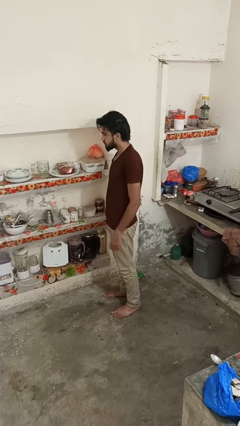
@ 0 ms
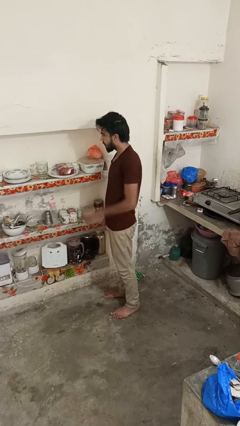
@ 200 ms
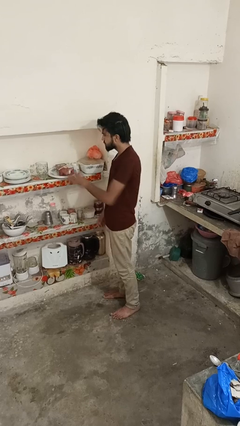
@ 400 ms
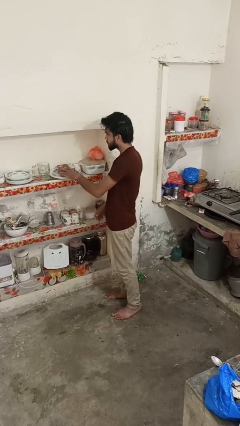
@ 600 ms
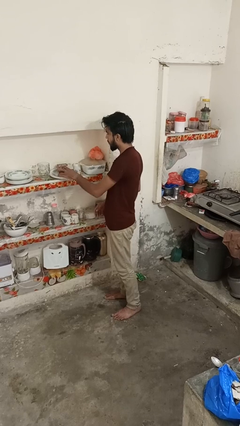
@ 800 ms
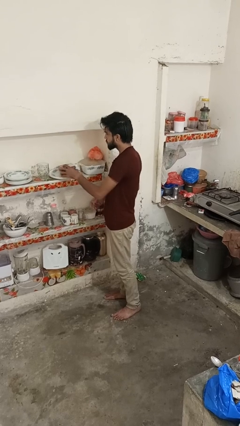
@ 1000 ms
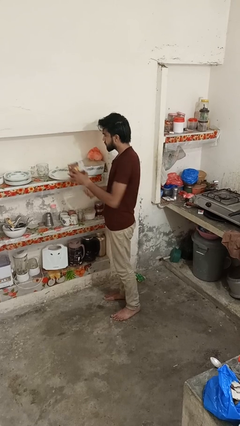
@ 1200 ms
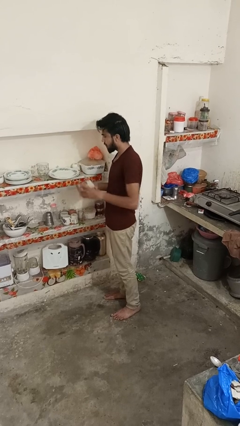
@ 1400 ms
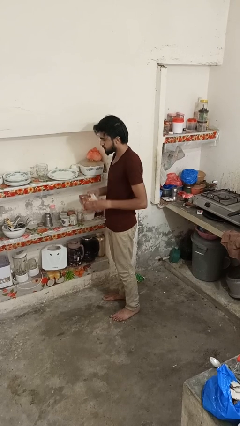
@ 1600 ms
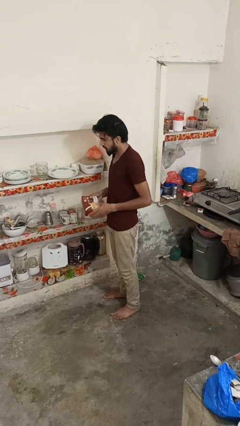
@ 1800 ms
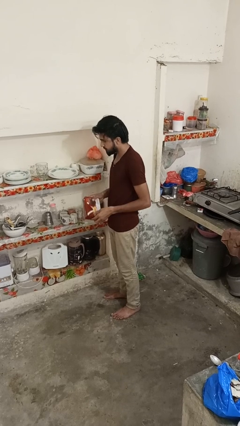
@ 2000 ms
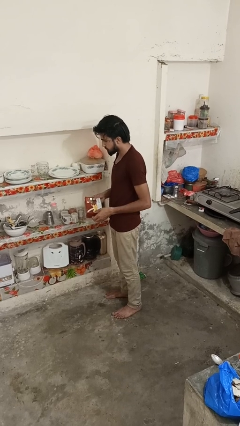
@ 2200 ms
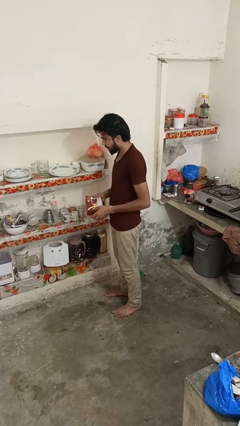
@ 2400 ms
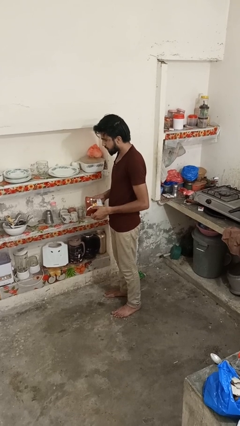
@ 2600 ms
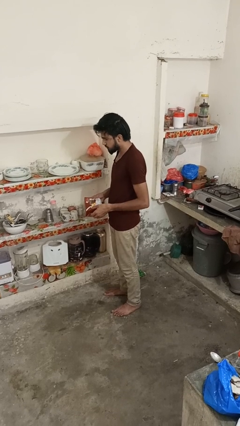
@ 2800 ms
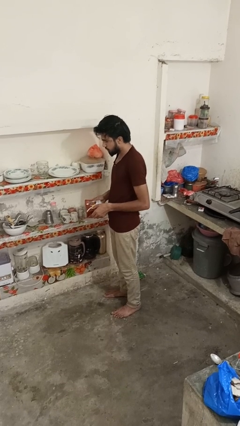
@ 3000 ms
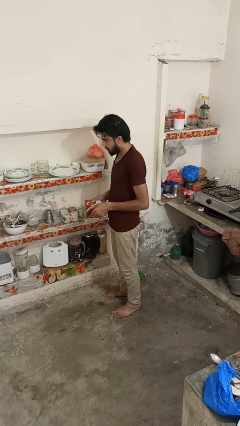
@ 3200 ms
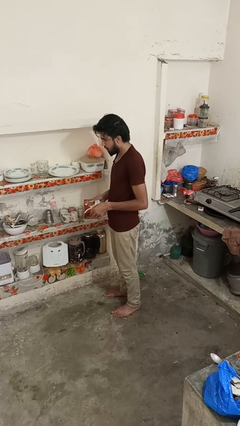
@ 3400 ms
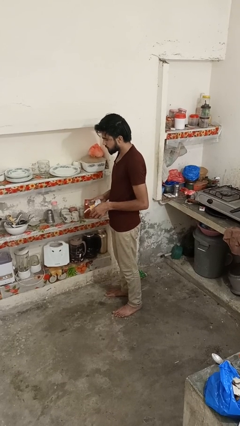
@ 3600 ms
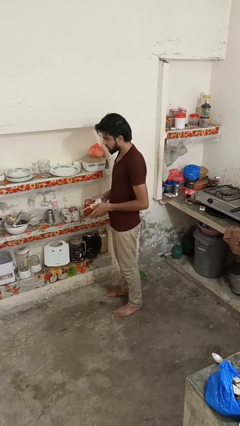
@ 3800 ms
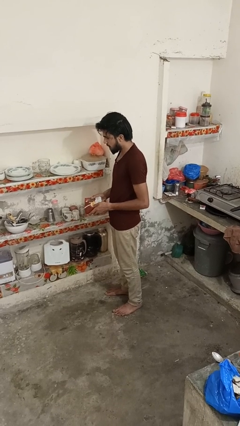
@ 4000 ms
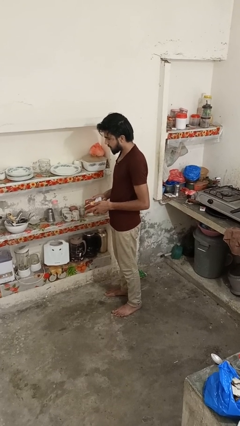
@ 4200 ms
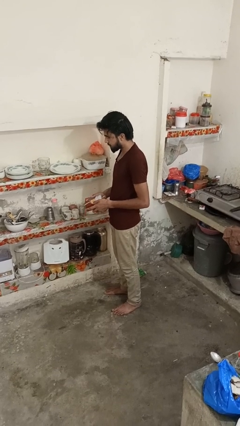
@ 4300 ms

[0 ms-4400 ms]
person picks up object from cabinet

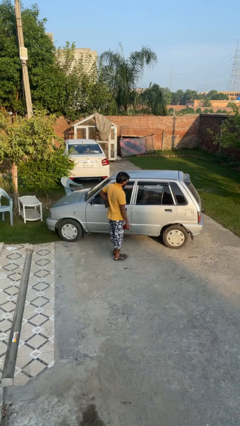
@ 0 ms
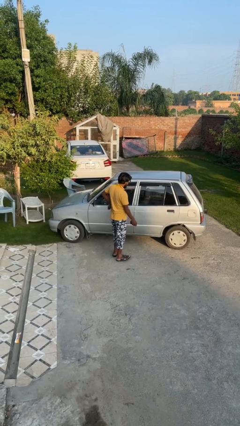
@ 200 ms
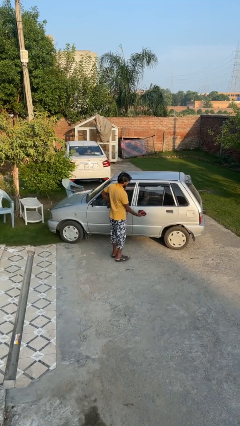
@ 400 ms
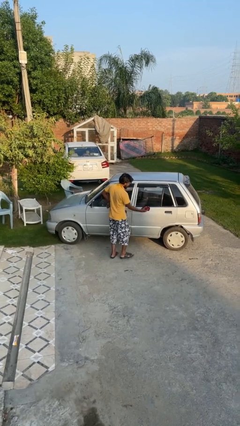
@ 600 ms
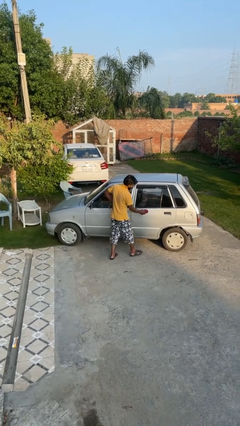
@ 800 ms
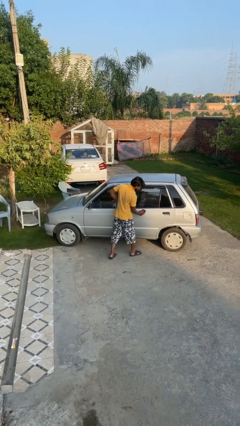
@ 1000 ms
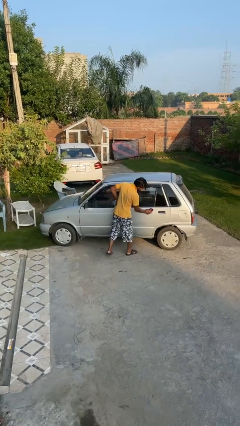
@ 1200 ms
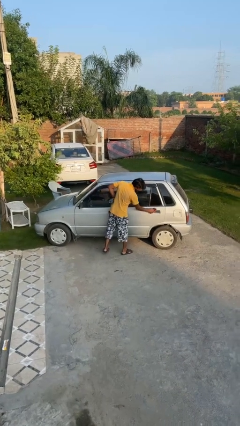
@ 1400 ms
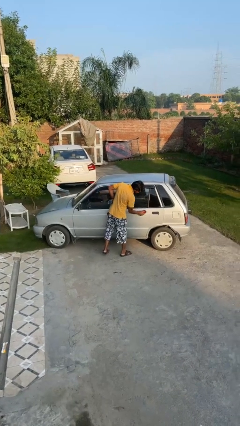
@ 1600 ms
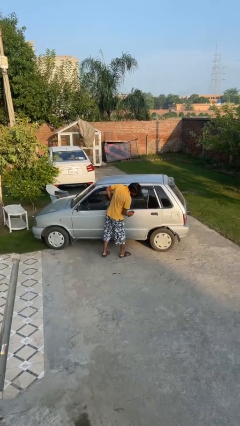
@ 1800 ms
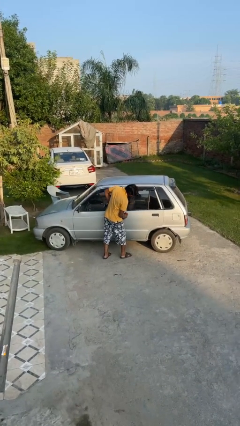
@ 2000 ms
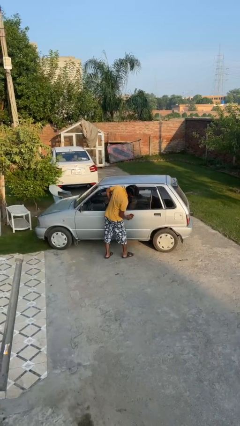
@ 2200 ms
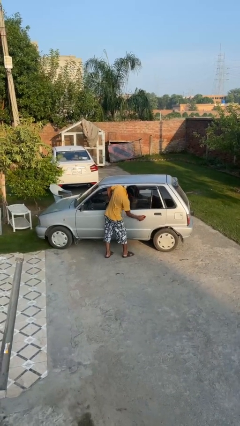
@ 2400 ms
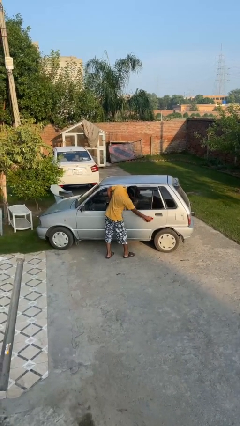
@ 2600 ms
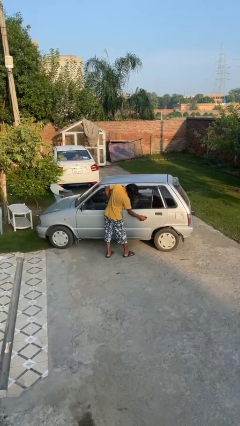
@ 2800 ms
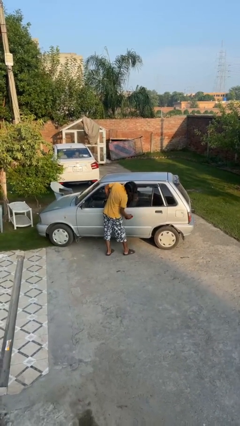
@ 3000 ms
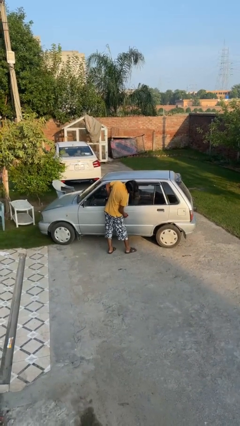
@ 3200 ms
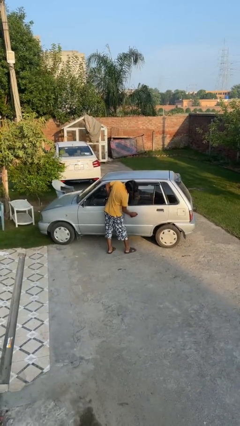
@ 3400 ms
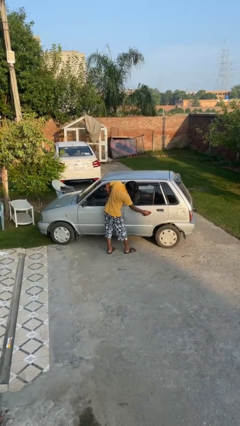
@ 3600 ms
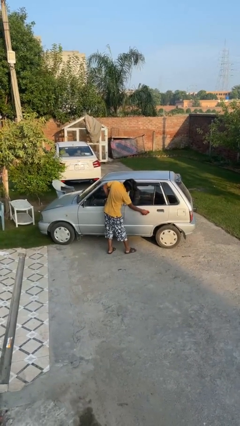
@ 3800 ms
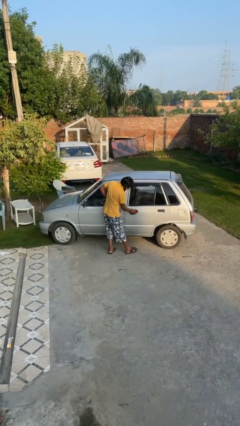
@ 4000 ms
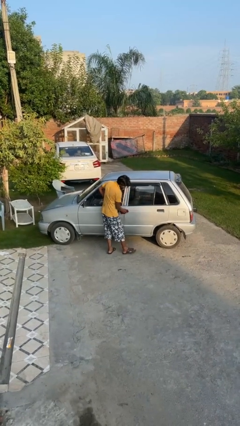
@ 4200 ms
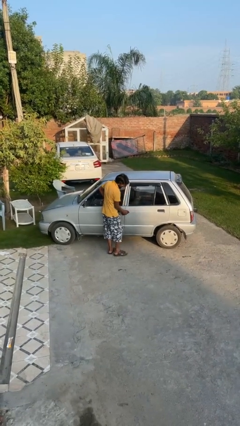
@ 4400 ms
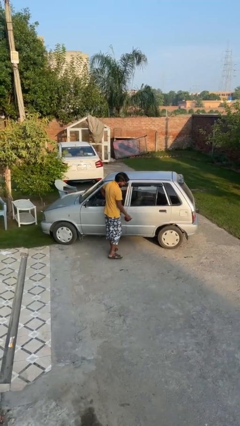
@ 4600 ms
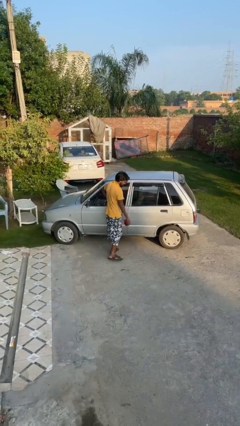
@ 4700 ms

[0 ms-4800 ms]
person polishes car with rag

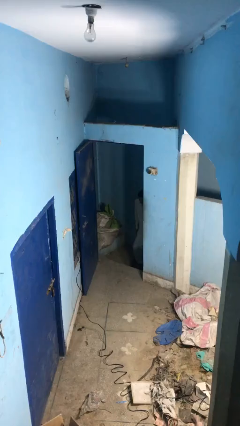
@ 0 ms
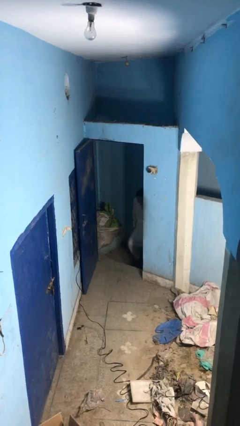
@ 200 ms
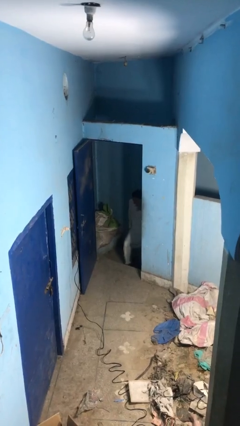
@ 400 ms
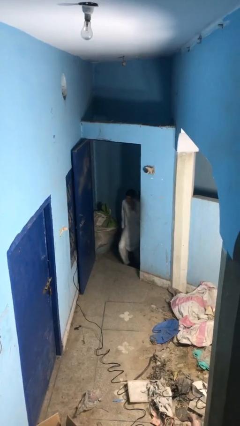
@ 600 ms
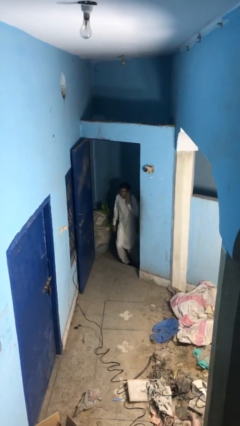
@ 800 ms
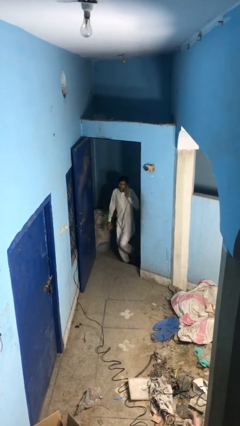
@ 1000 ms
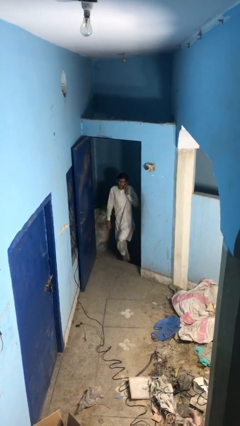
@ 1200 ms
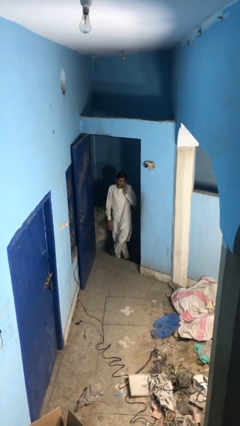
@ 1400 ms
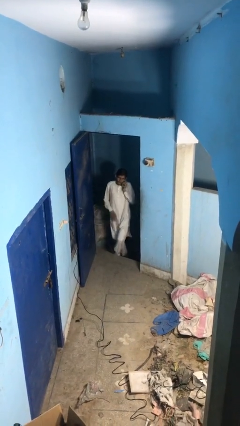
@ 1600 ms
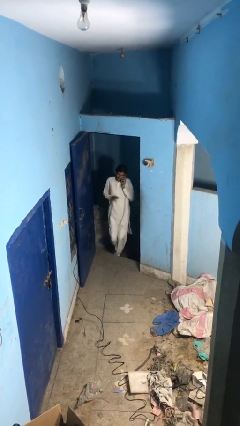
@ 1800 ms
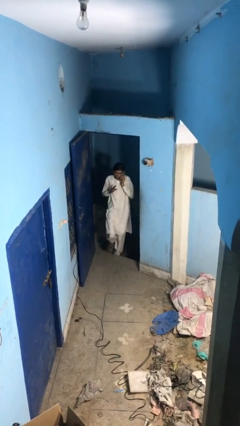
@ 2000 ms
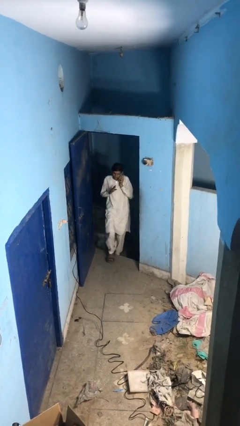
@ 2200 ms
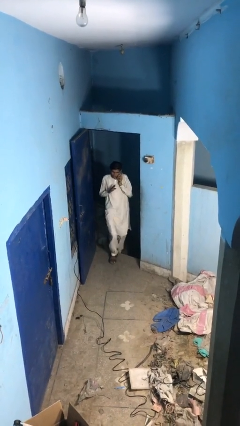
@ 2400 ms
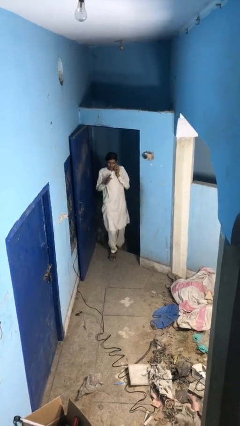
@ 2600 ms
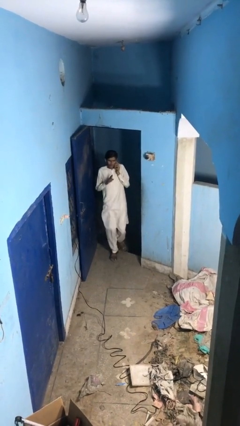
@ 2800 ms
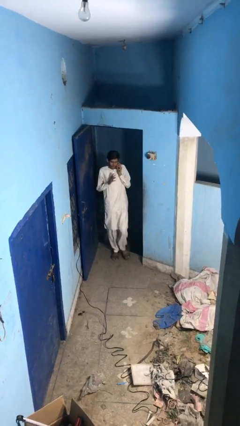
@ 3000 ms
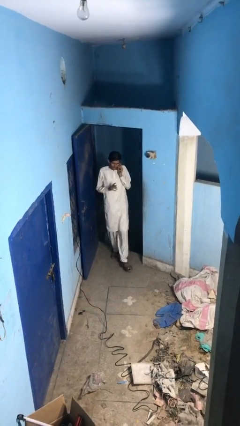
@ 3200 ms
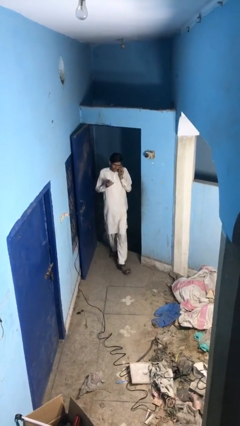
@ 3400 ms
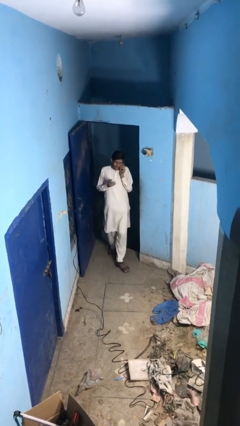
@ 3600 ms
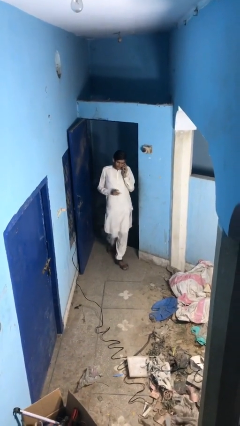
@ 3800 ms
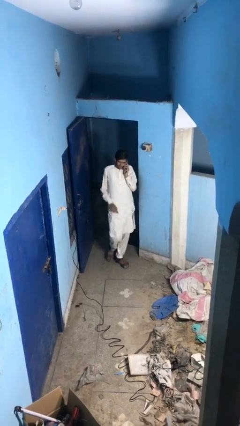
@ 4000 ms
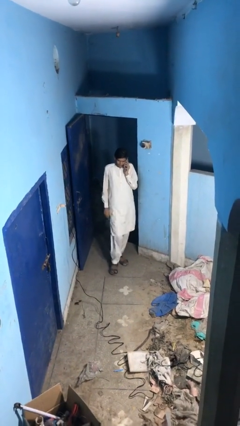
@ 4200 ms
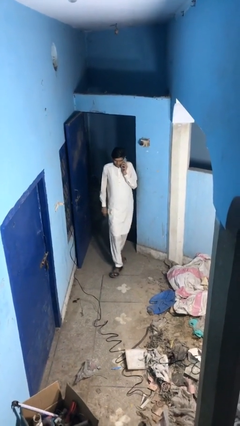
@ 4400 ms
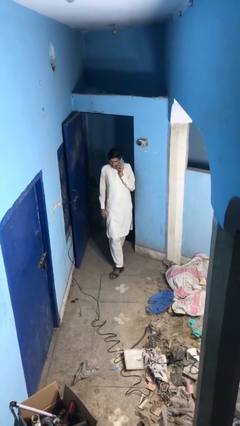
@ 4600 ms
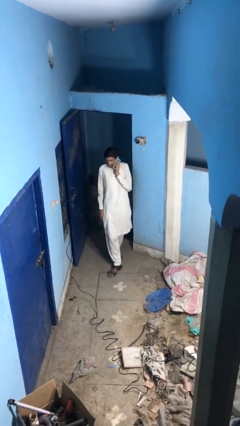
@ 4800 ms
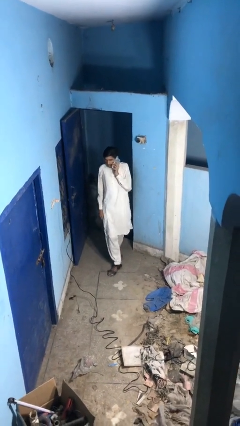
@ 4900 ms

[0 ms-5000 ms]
person enters scene through structure

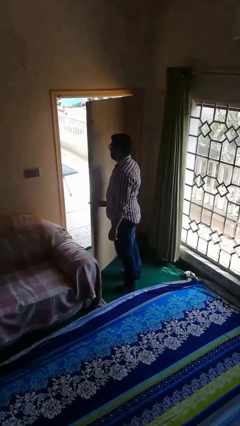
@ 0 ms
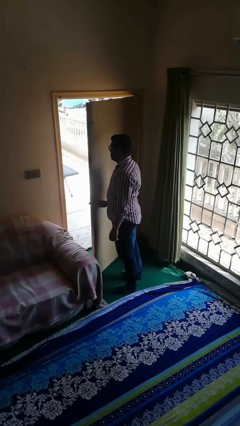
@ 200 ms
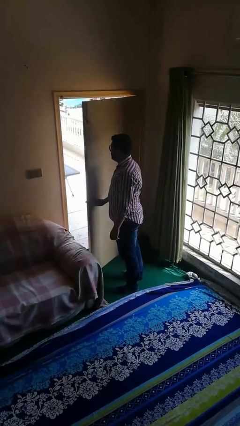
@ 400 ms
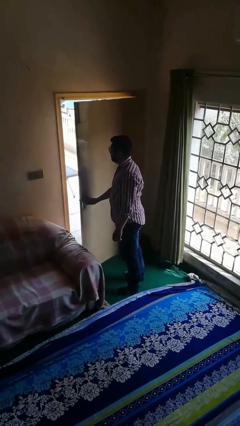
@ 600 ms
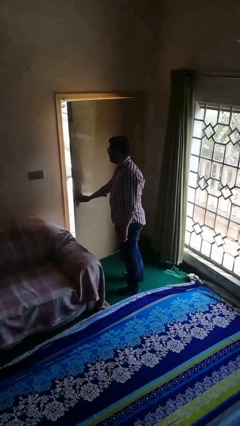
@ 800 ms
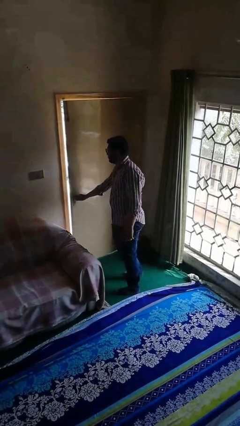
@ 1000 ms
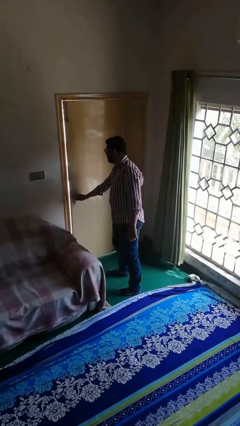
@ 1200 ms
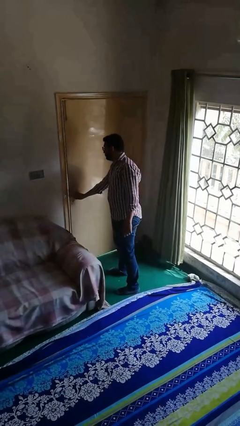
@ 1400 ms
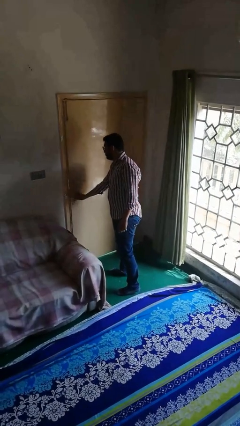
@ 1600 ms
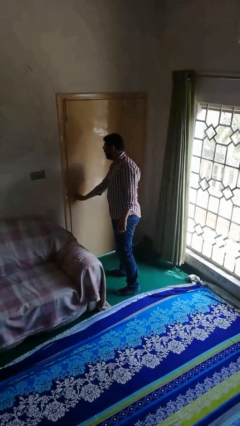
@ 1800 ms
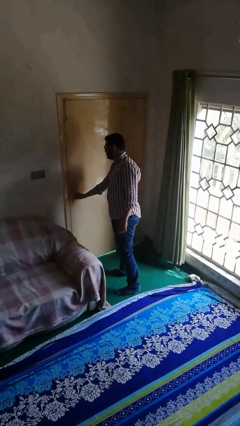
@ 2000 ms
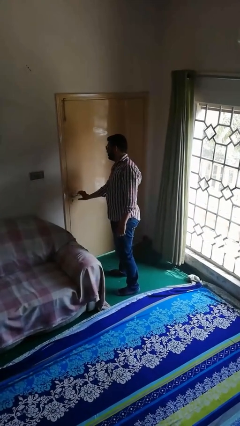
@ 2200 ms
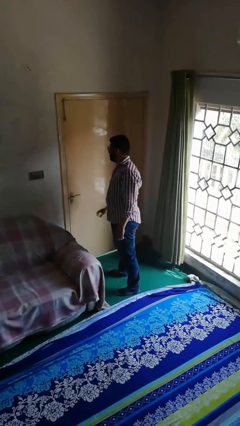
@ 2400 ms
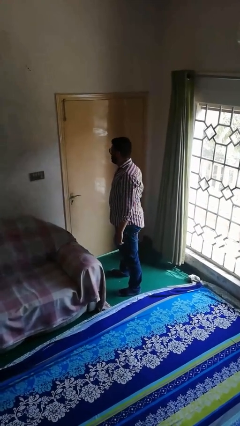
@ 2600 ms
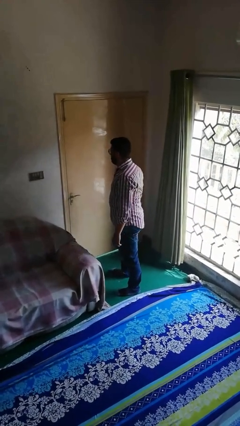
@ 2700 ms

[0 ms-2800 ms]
person closes facility door

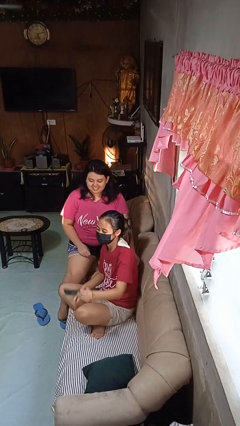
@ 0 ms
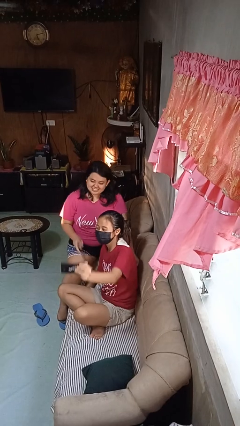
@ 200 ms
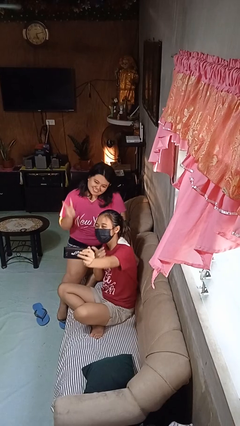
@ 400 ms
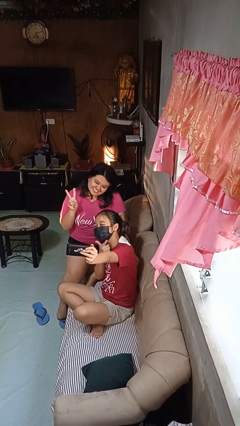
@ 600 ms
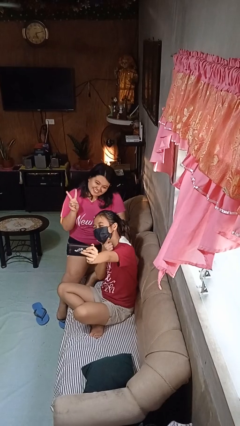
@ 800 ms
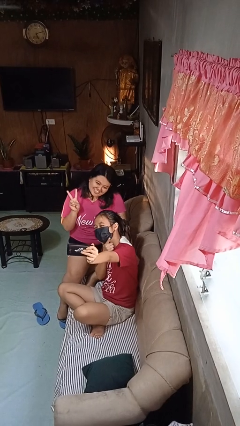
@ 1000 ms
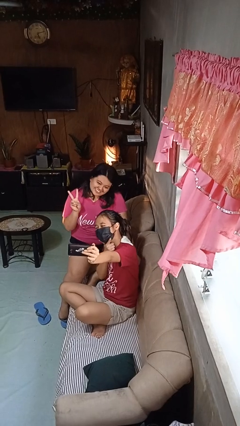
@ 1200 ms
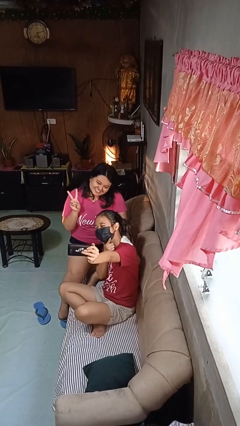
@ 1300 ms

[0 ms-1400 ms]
person takes selfie with person
